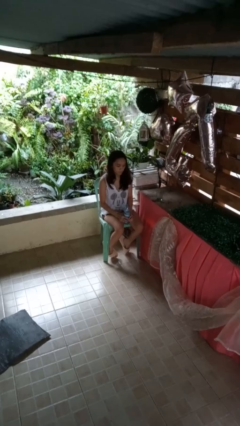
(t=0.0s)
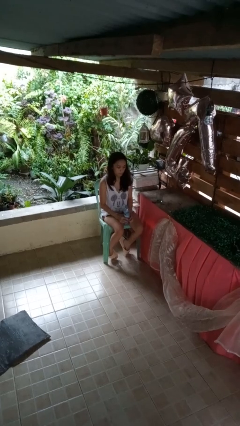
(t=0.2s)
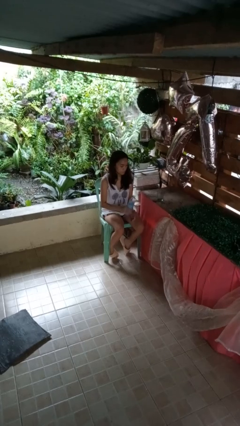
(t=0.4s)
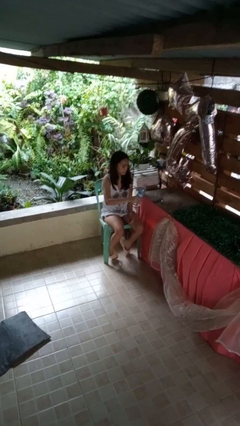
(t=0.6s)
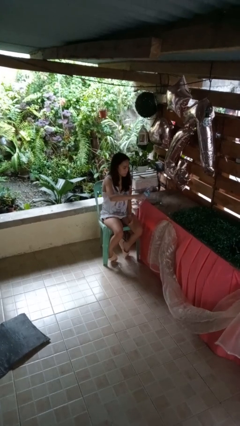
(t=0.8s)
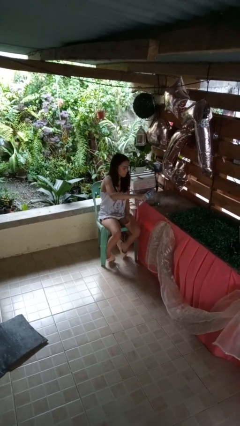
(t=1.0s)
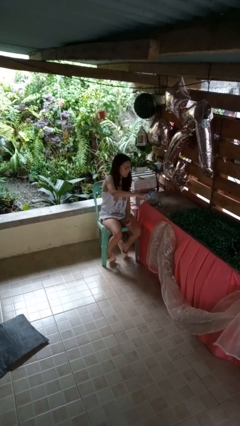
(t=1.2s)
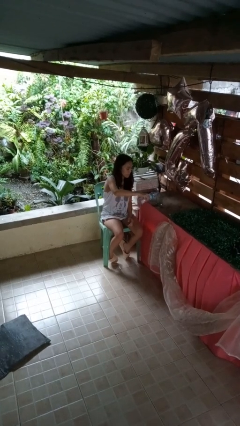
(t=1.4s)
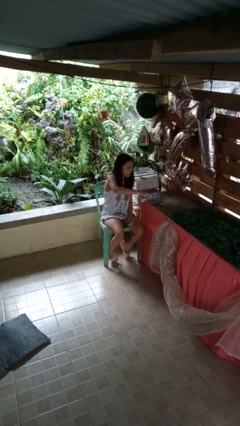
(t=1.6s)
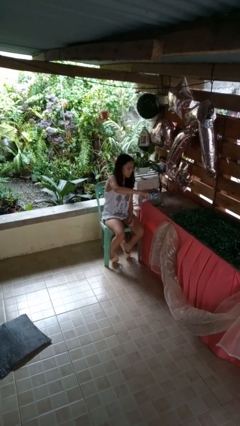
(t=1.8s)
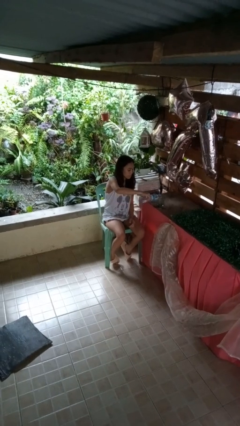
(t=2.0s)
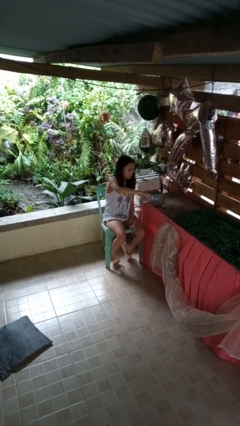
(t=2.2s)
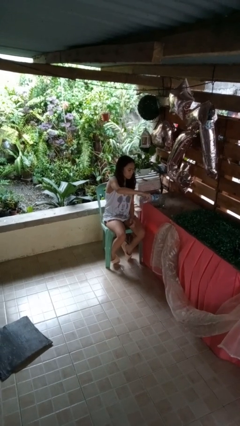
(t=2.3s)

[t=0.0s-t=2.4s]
person pours liquid into cup

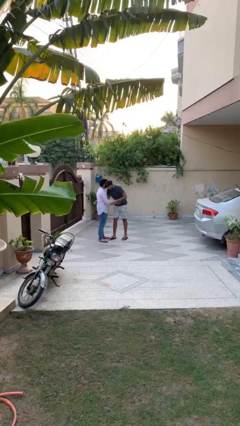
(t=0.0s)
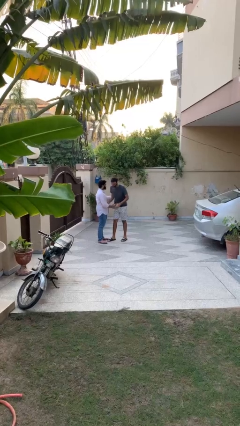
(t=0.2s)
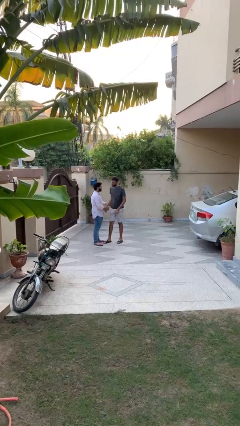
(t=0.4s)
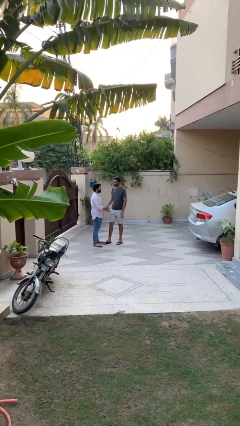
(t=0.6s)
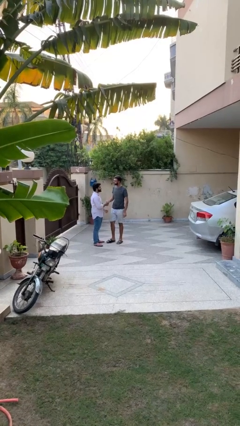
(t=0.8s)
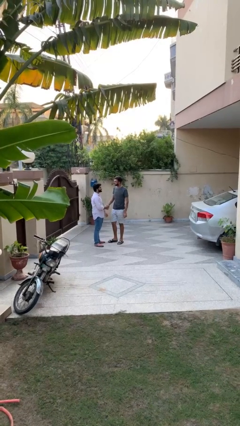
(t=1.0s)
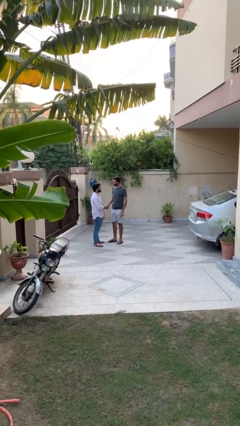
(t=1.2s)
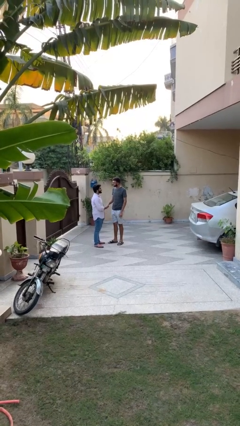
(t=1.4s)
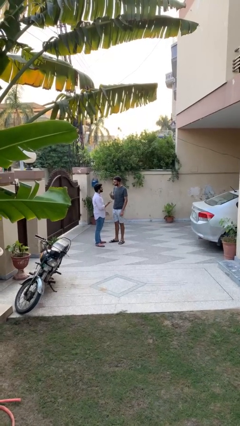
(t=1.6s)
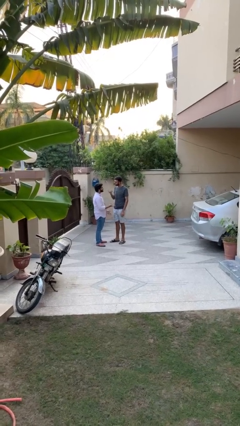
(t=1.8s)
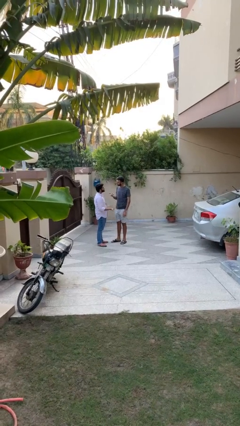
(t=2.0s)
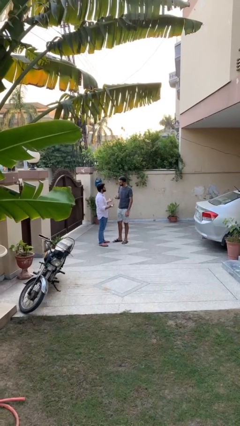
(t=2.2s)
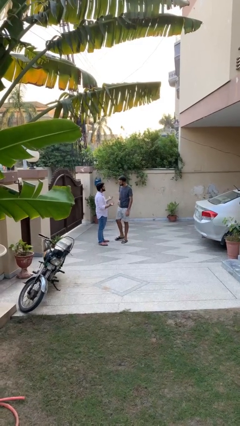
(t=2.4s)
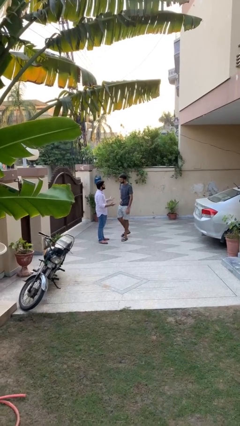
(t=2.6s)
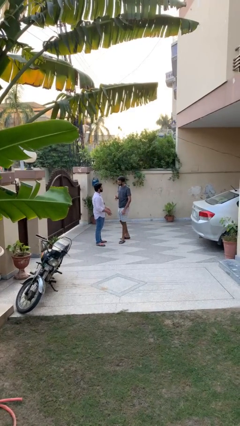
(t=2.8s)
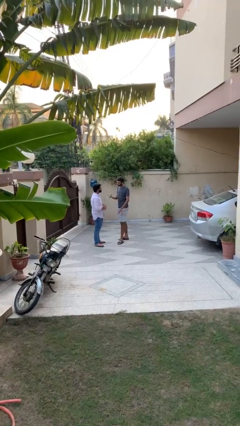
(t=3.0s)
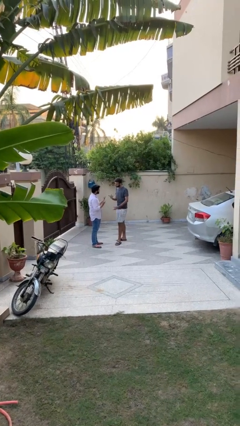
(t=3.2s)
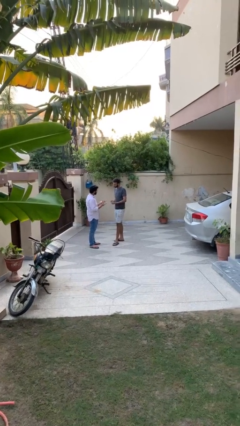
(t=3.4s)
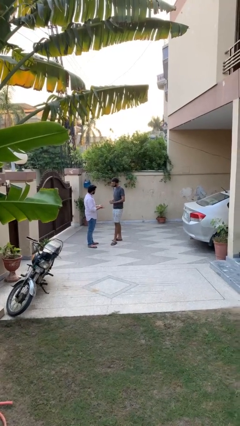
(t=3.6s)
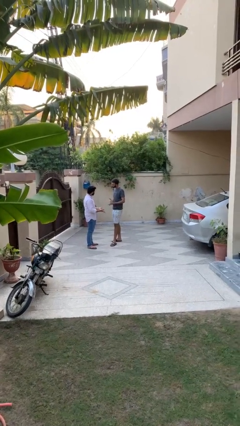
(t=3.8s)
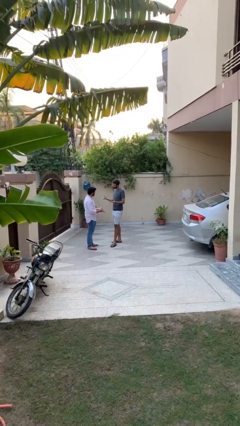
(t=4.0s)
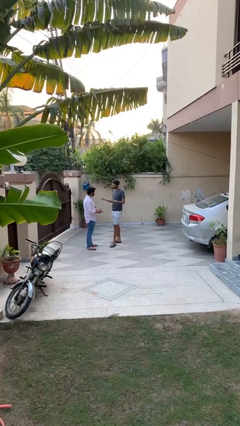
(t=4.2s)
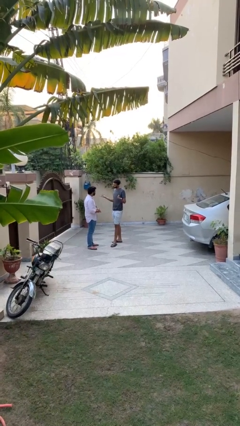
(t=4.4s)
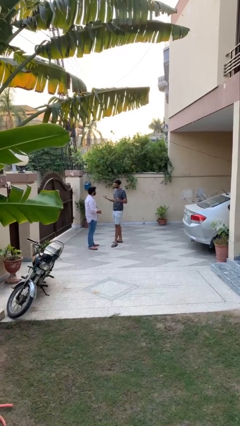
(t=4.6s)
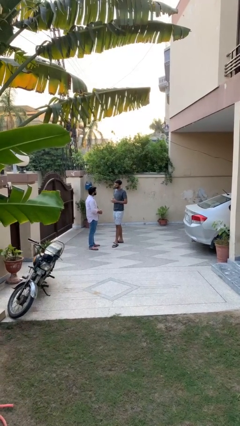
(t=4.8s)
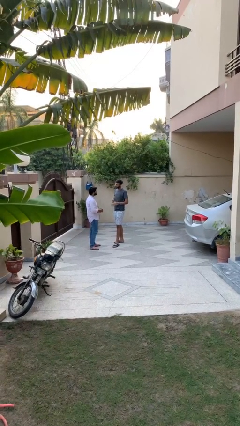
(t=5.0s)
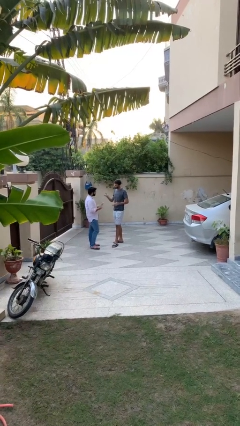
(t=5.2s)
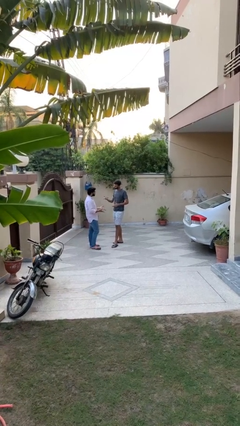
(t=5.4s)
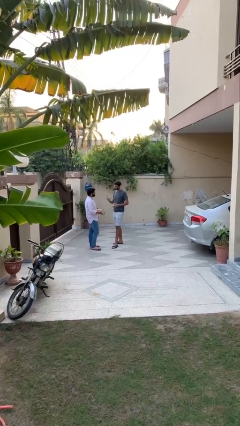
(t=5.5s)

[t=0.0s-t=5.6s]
person talks to person

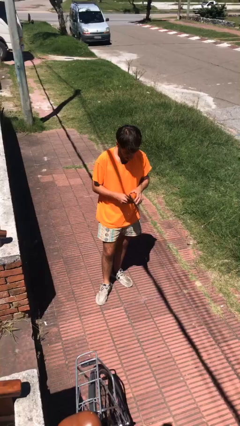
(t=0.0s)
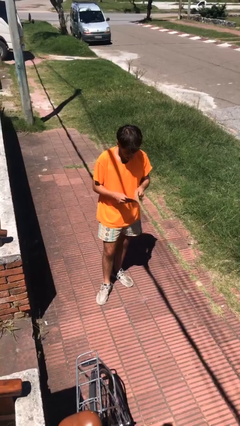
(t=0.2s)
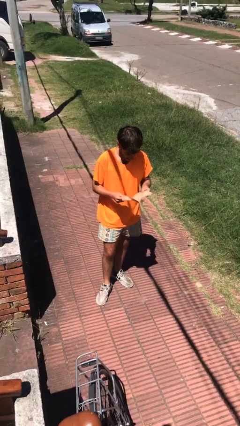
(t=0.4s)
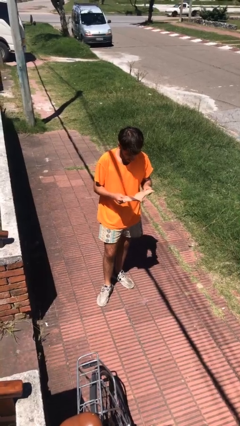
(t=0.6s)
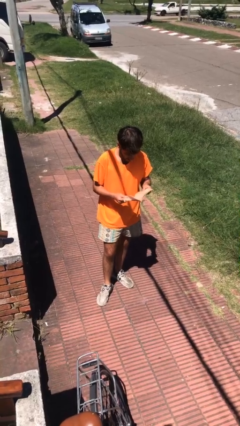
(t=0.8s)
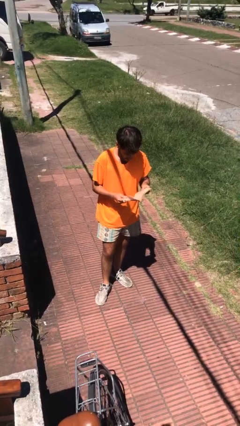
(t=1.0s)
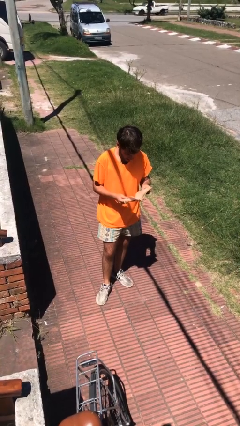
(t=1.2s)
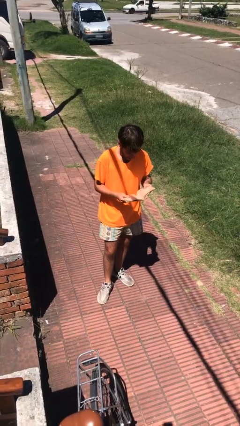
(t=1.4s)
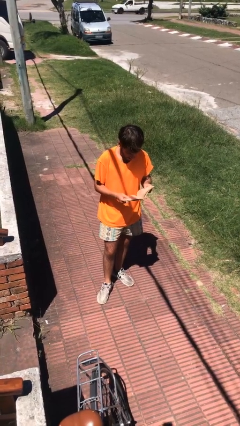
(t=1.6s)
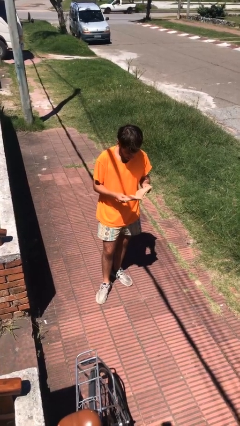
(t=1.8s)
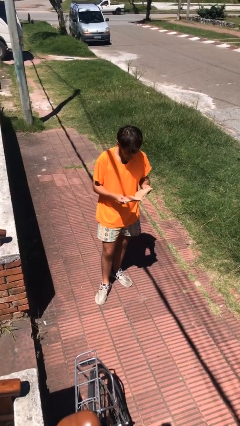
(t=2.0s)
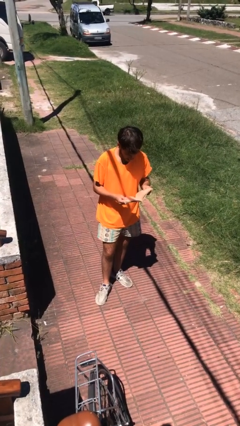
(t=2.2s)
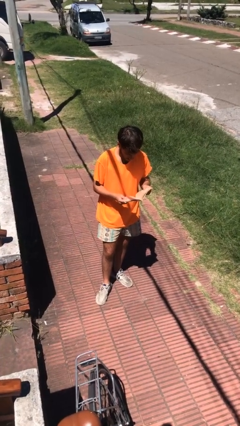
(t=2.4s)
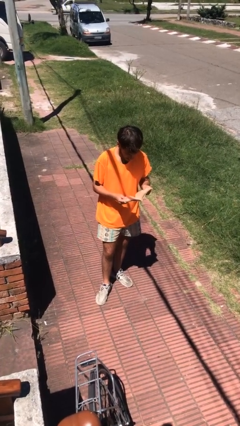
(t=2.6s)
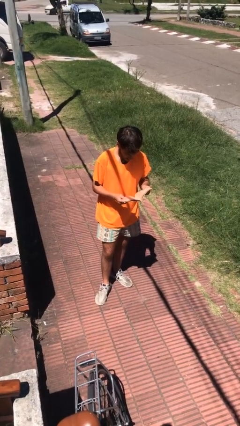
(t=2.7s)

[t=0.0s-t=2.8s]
person reads document

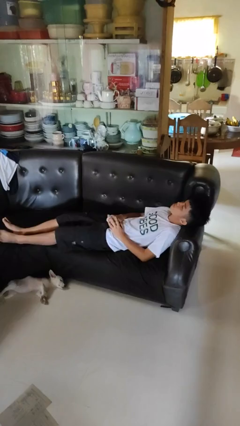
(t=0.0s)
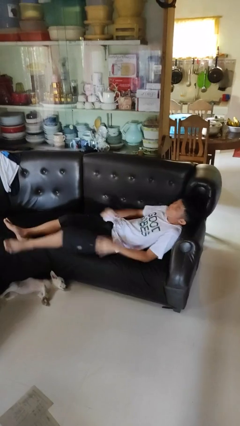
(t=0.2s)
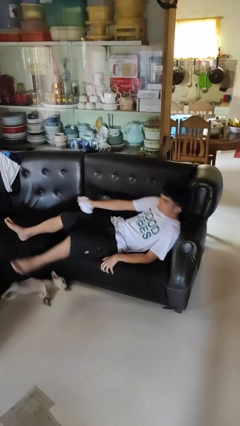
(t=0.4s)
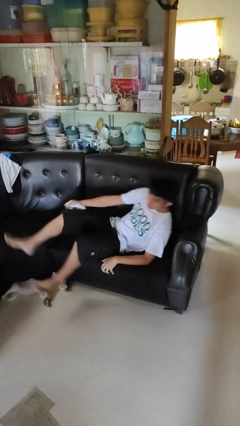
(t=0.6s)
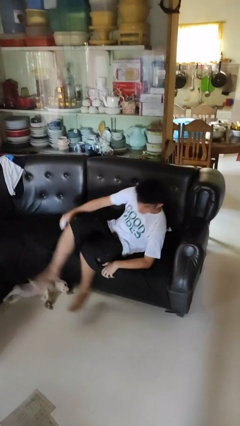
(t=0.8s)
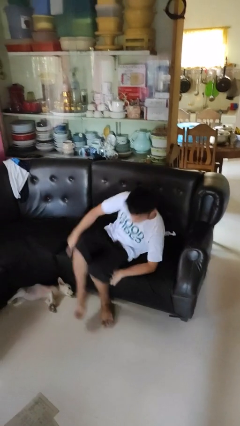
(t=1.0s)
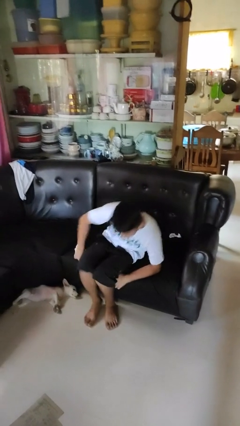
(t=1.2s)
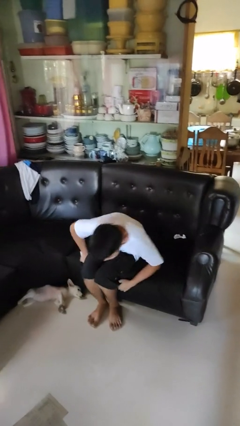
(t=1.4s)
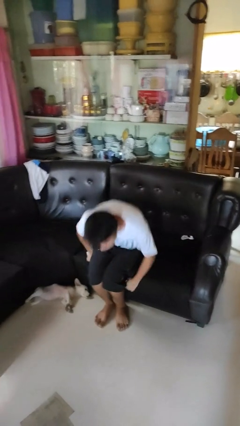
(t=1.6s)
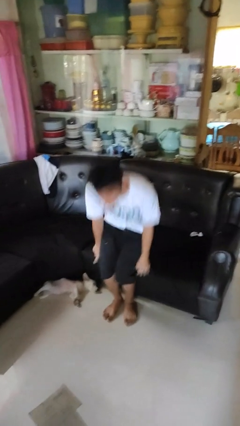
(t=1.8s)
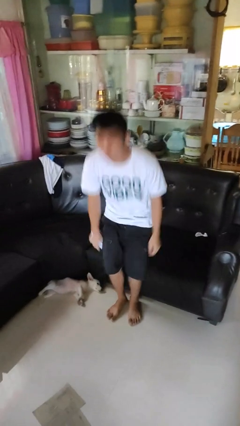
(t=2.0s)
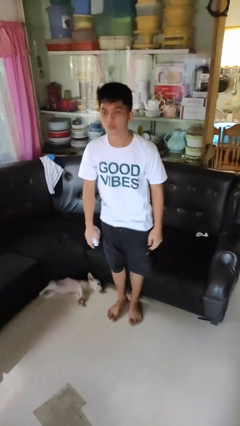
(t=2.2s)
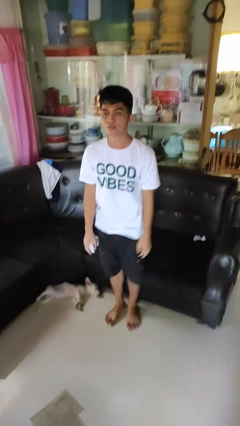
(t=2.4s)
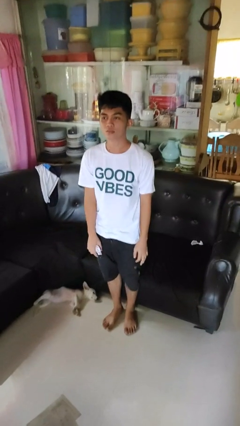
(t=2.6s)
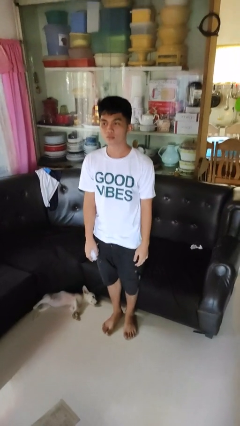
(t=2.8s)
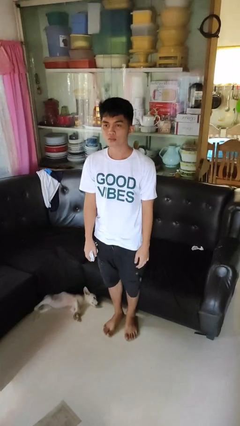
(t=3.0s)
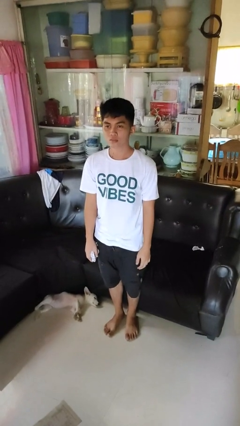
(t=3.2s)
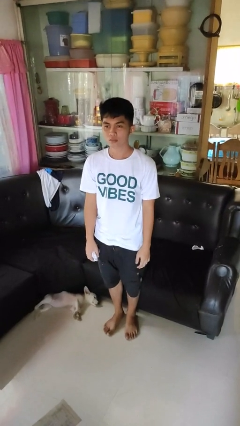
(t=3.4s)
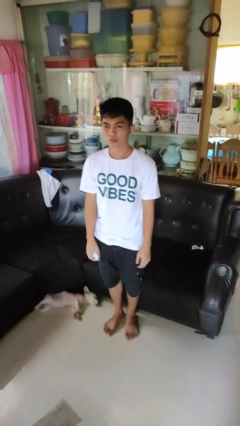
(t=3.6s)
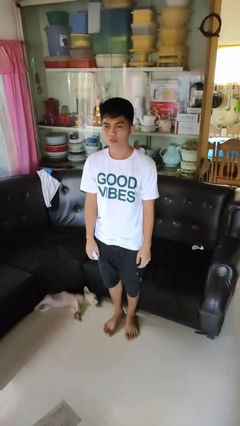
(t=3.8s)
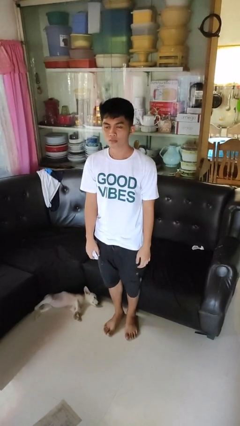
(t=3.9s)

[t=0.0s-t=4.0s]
person stands up

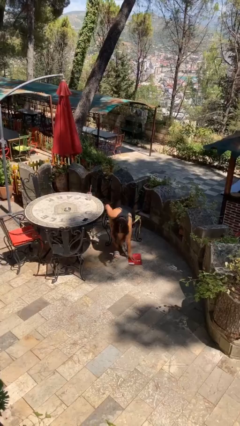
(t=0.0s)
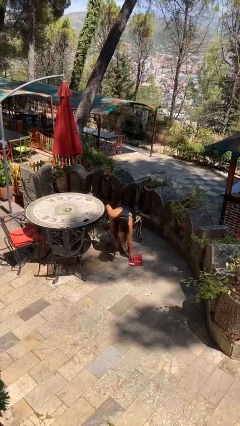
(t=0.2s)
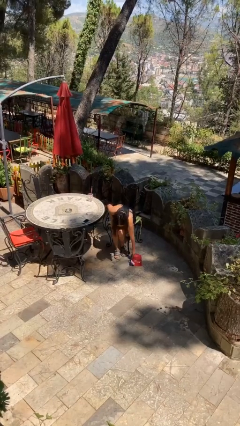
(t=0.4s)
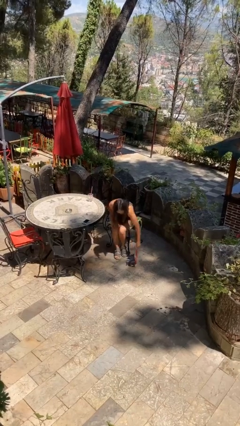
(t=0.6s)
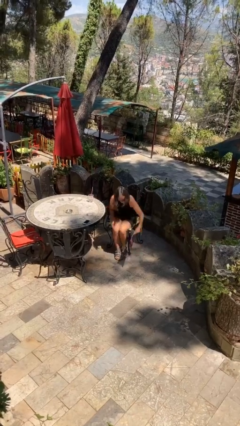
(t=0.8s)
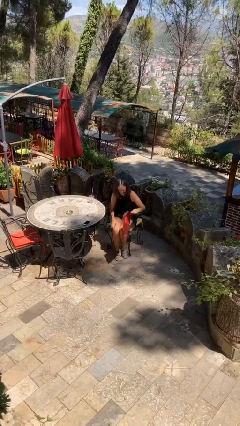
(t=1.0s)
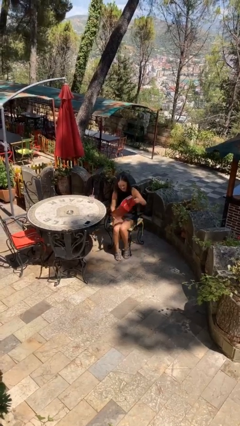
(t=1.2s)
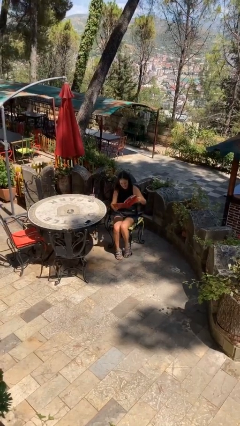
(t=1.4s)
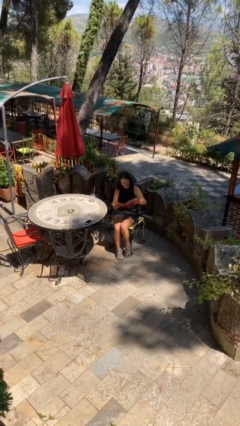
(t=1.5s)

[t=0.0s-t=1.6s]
person picks up object from floor

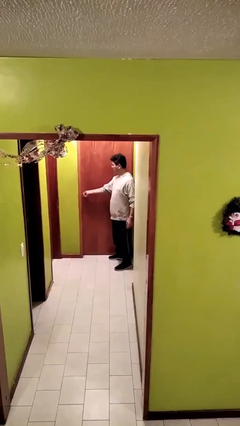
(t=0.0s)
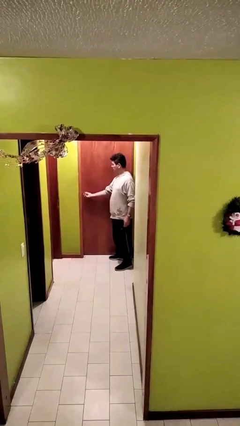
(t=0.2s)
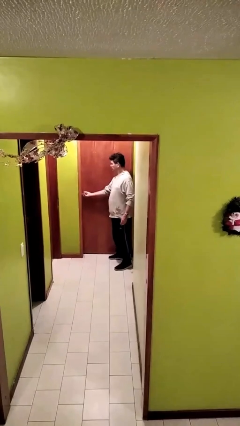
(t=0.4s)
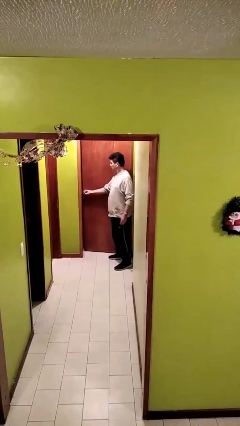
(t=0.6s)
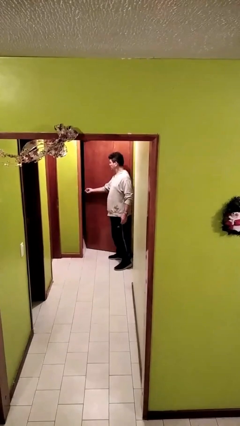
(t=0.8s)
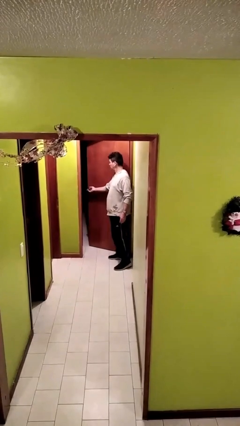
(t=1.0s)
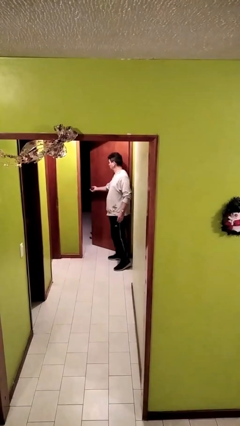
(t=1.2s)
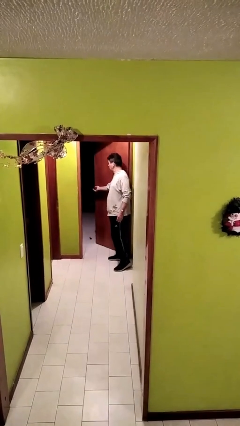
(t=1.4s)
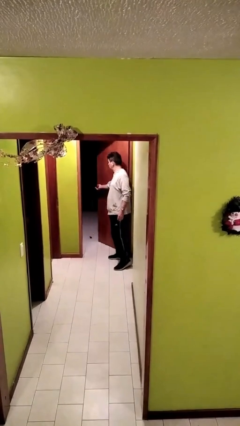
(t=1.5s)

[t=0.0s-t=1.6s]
person opens facility door
